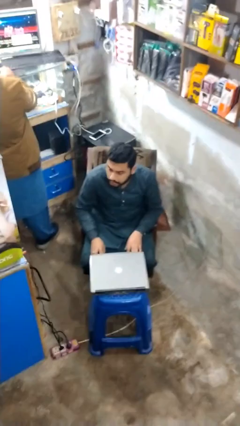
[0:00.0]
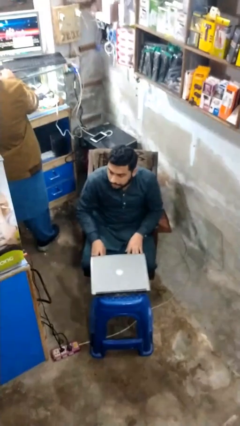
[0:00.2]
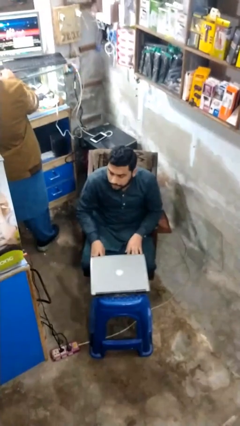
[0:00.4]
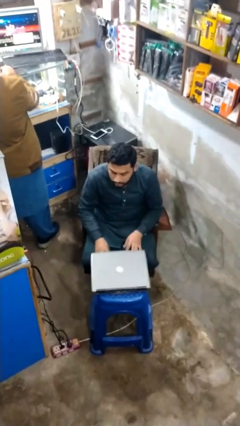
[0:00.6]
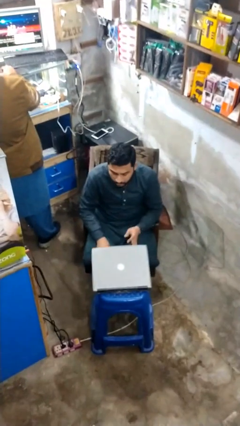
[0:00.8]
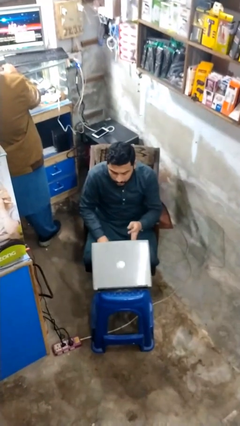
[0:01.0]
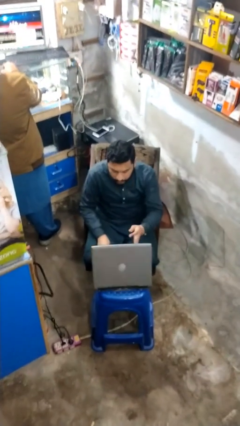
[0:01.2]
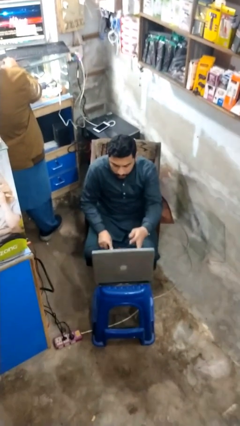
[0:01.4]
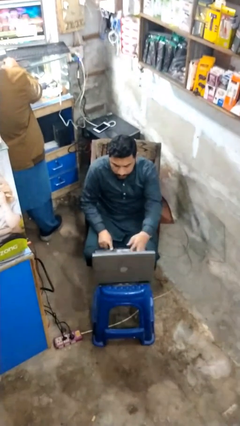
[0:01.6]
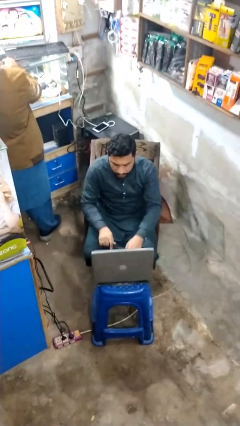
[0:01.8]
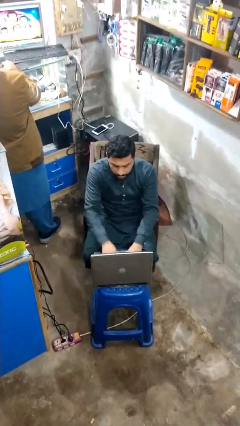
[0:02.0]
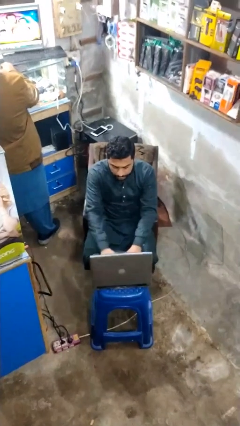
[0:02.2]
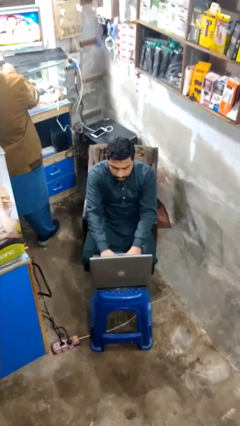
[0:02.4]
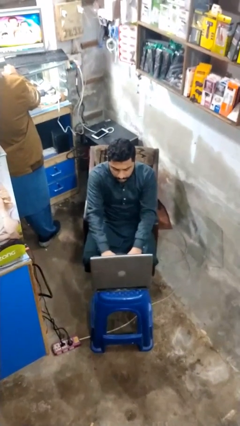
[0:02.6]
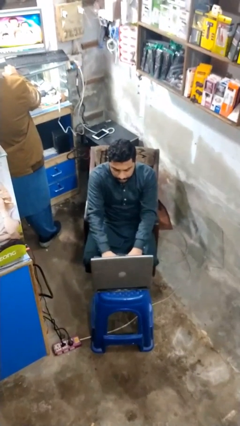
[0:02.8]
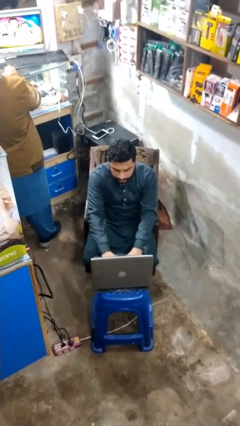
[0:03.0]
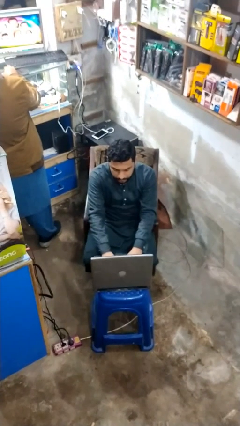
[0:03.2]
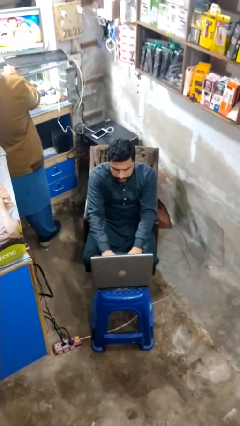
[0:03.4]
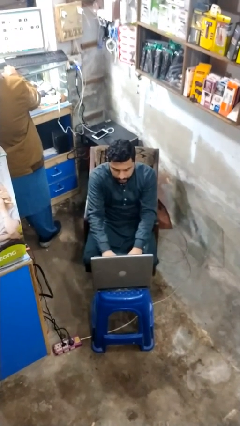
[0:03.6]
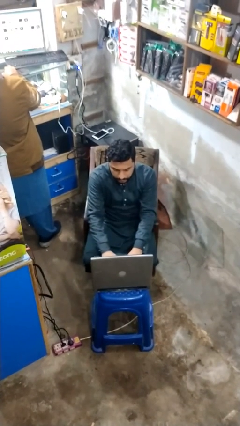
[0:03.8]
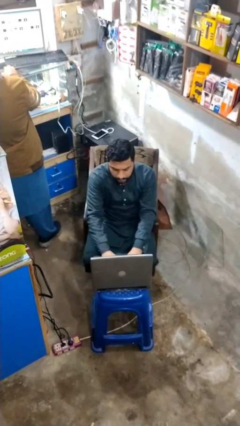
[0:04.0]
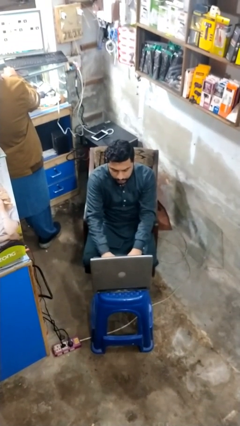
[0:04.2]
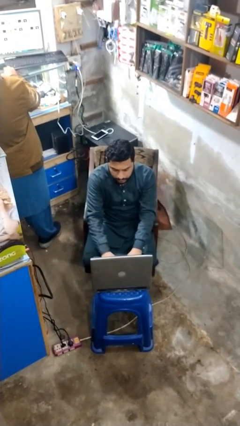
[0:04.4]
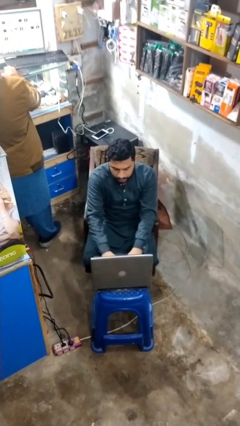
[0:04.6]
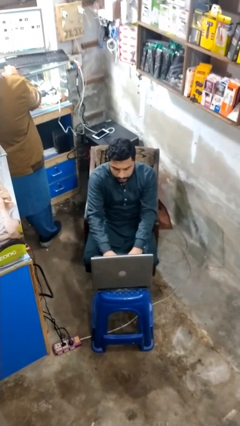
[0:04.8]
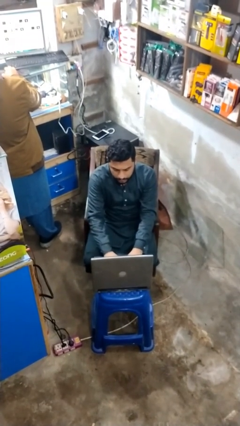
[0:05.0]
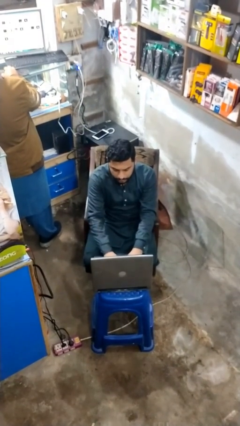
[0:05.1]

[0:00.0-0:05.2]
person interacts with laptop

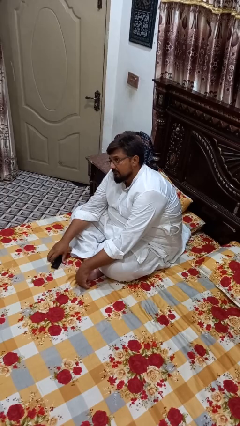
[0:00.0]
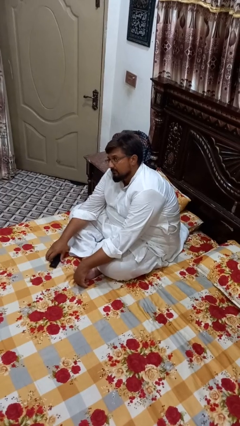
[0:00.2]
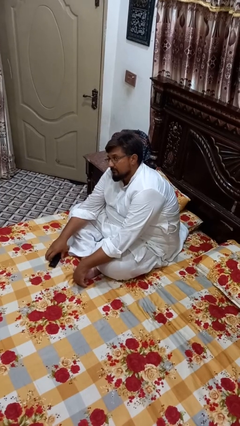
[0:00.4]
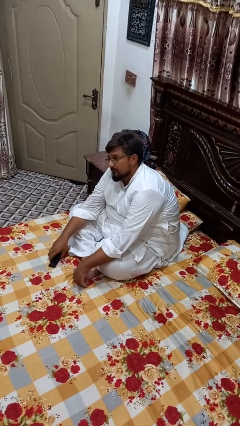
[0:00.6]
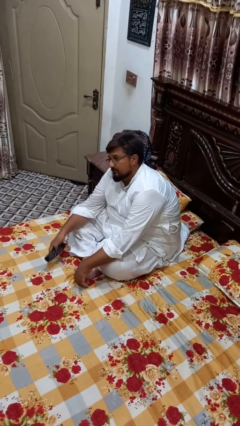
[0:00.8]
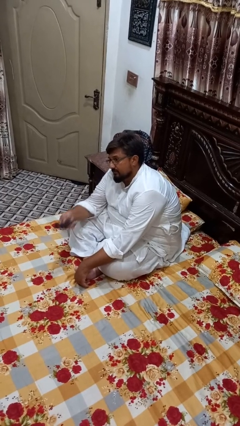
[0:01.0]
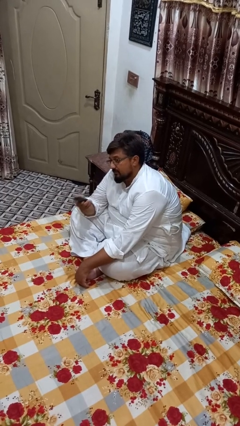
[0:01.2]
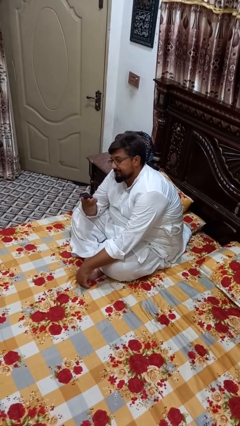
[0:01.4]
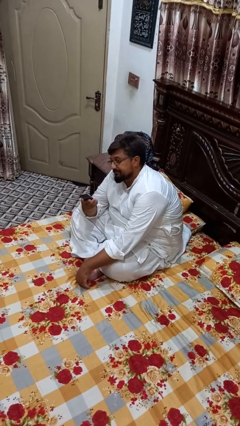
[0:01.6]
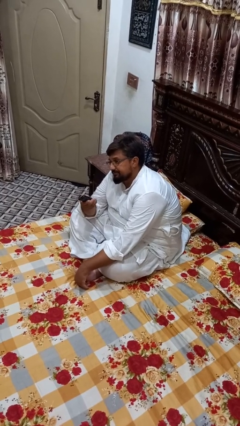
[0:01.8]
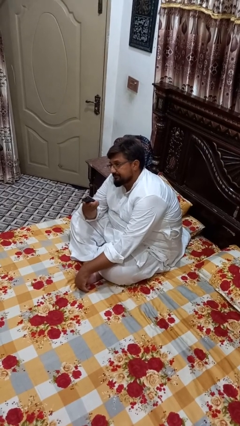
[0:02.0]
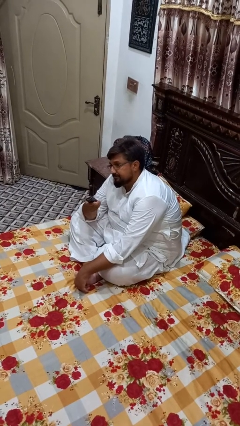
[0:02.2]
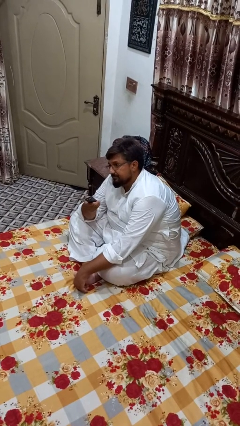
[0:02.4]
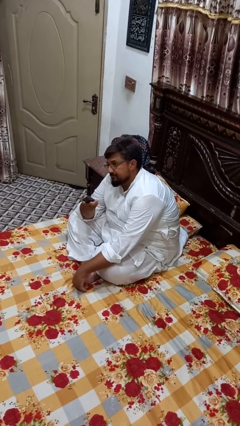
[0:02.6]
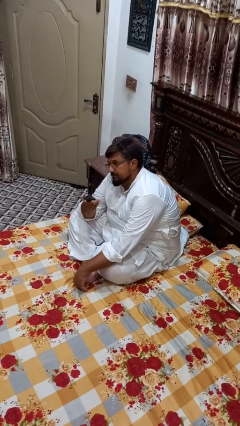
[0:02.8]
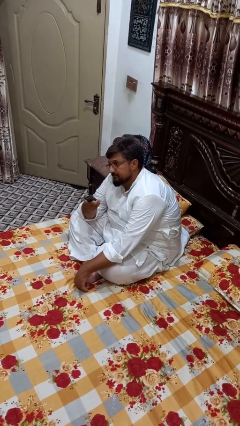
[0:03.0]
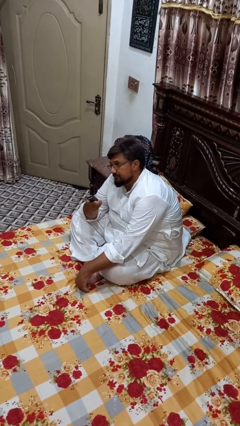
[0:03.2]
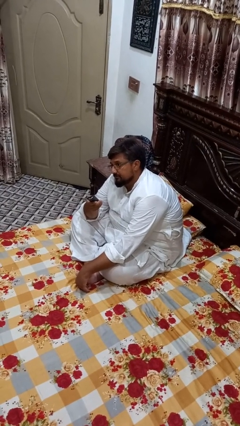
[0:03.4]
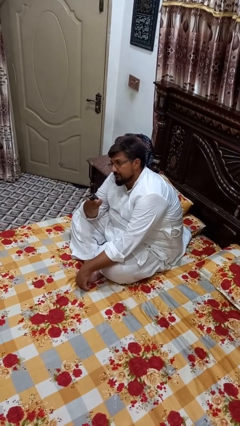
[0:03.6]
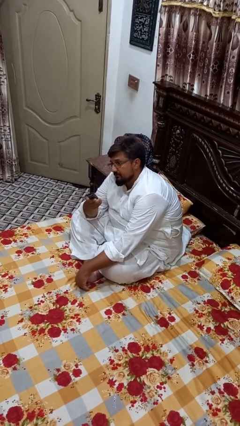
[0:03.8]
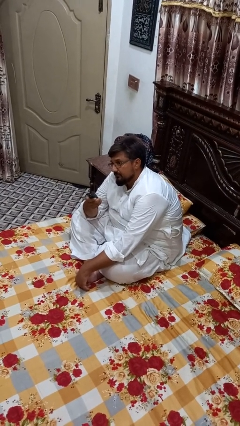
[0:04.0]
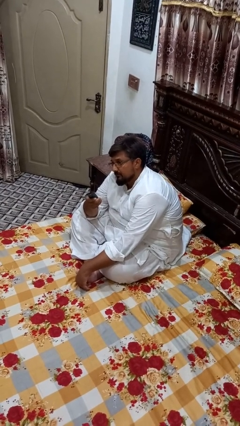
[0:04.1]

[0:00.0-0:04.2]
person uses television remote

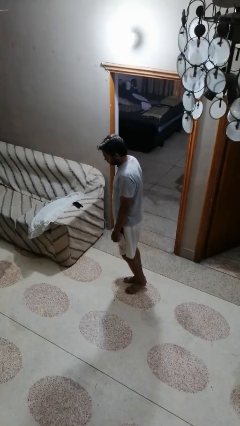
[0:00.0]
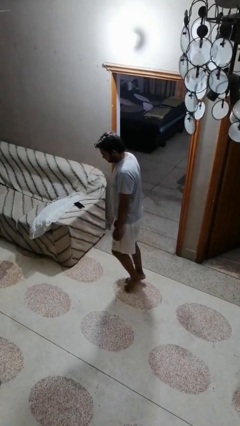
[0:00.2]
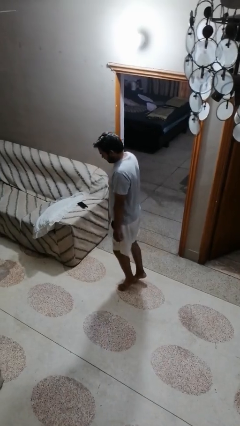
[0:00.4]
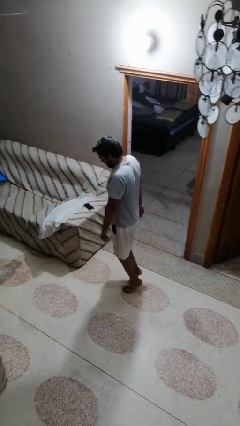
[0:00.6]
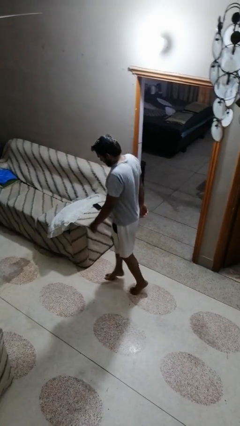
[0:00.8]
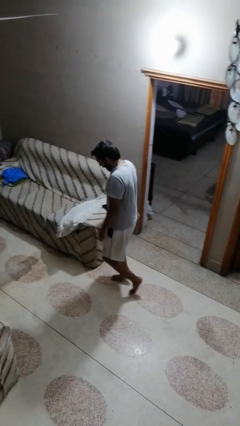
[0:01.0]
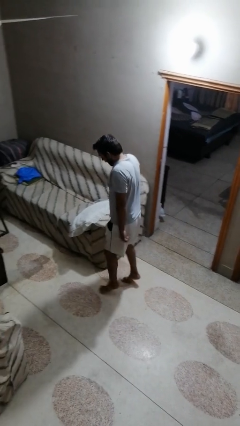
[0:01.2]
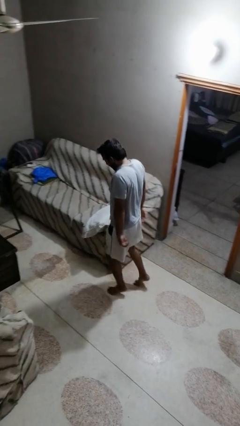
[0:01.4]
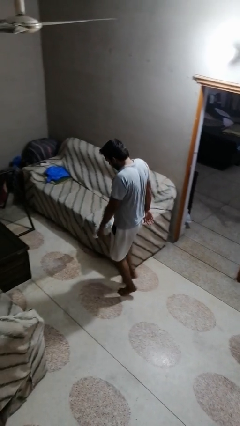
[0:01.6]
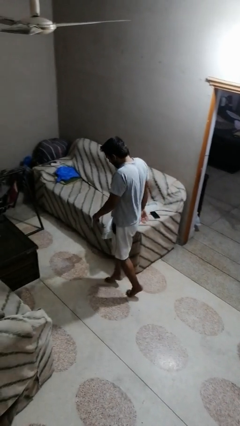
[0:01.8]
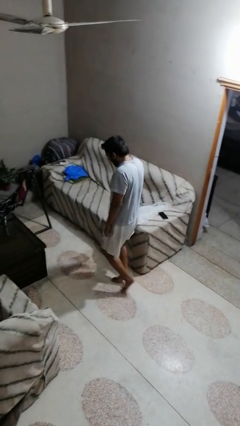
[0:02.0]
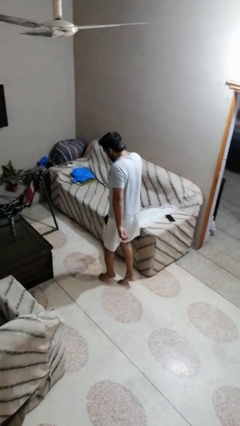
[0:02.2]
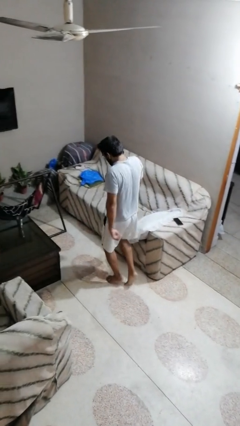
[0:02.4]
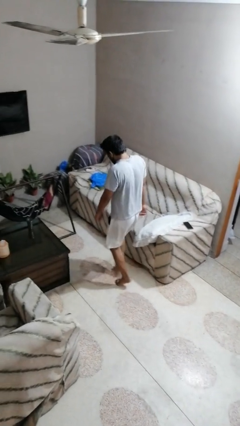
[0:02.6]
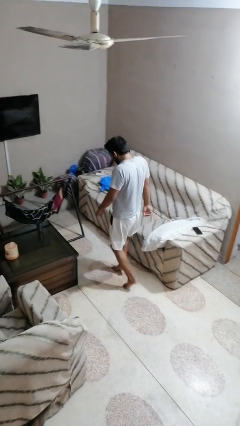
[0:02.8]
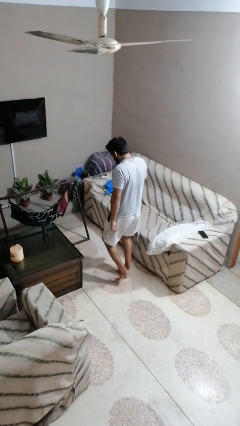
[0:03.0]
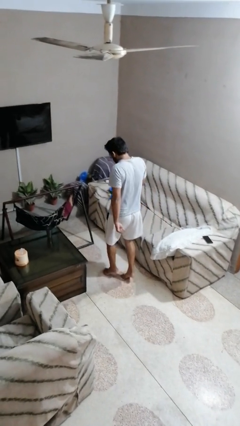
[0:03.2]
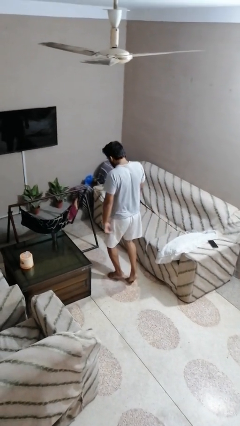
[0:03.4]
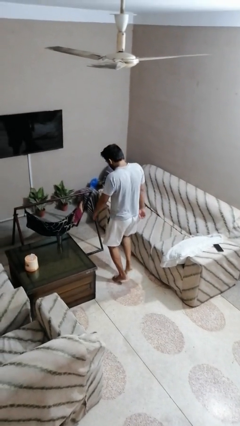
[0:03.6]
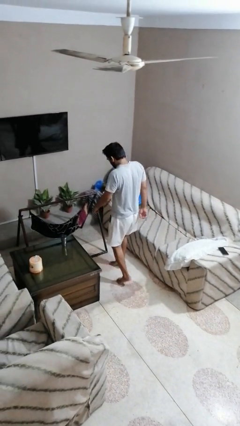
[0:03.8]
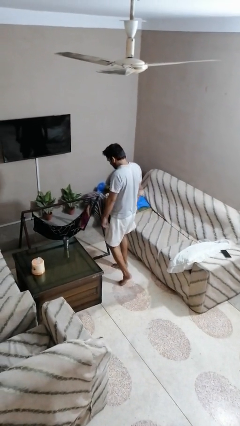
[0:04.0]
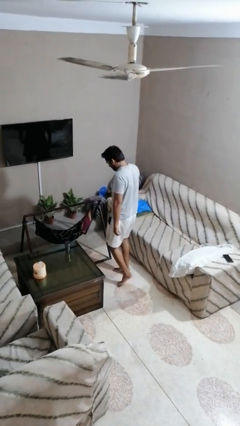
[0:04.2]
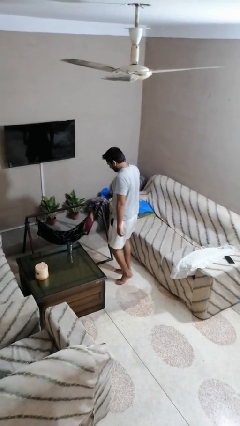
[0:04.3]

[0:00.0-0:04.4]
person walks tiptoe

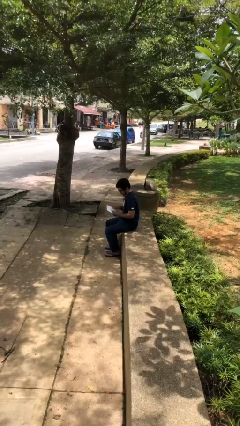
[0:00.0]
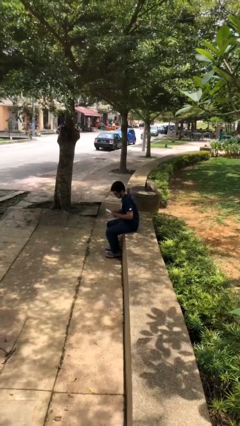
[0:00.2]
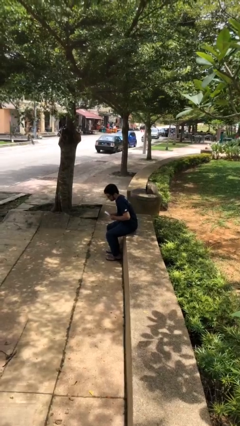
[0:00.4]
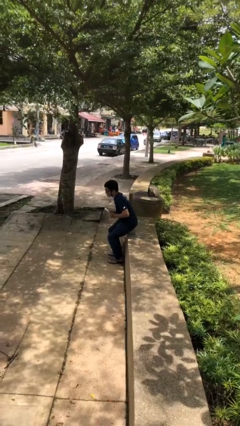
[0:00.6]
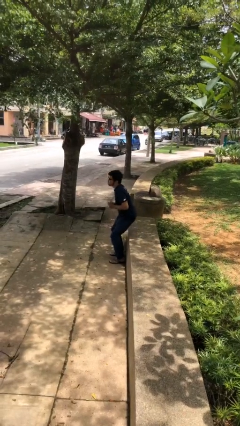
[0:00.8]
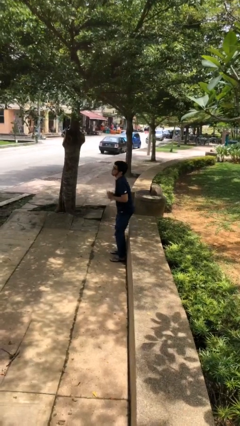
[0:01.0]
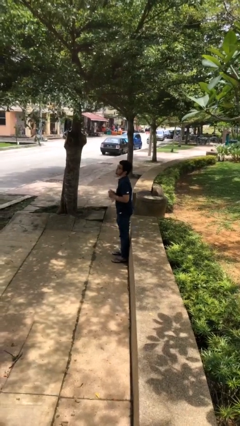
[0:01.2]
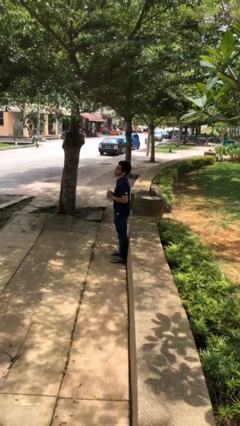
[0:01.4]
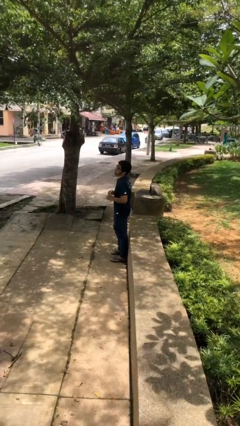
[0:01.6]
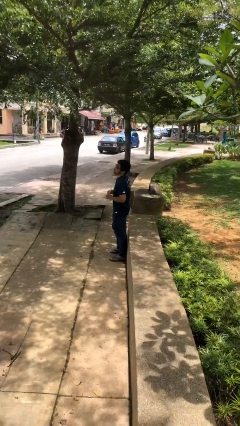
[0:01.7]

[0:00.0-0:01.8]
person stands up

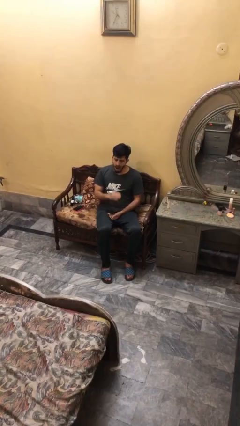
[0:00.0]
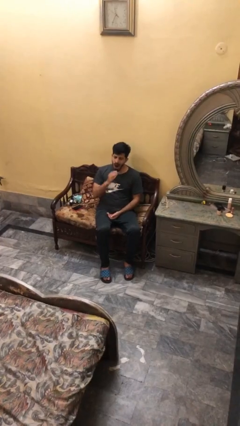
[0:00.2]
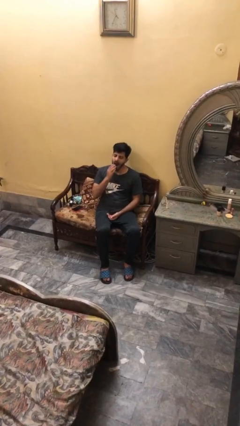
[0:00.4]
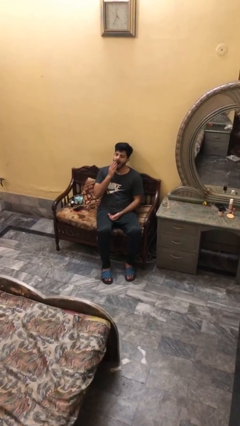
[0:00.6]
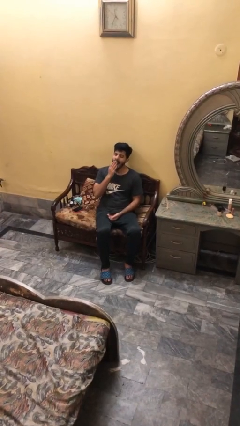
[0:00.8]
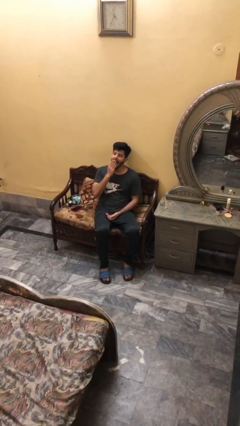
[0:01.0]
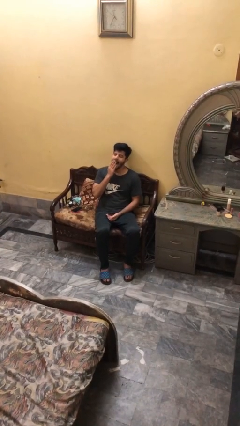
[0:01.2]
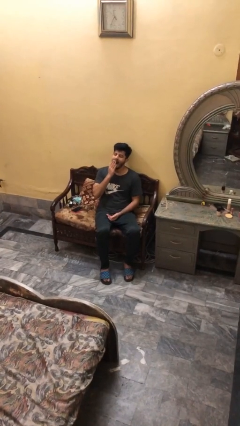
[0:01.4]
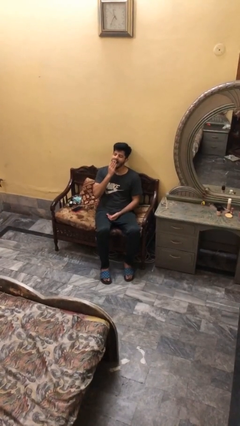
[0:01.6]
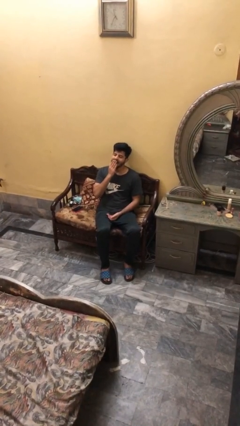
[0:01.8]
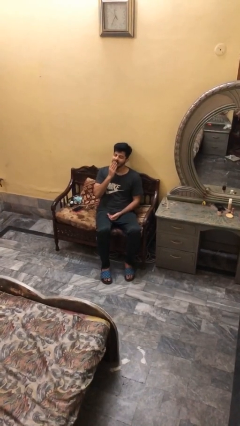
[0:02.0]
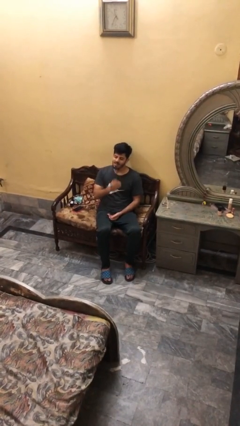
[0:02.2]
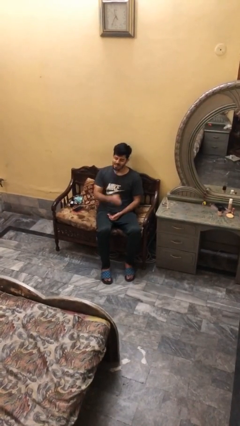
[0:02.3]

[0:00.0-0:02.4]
person yawns
